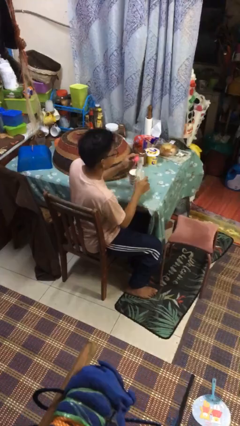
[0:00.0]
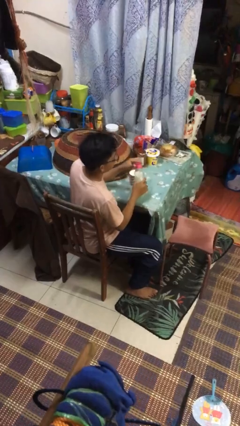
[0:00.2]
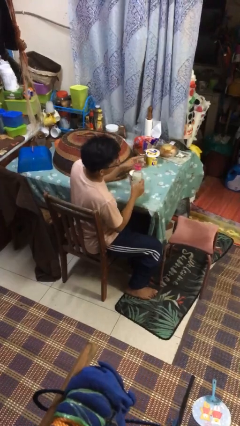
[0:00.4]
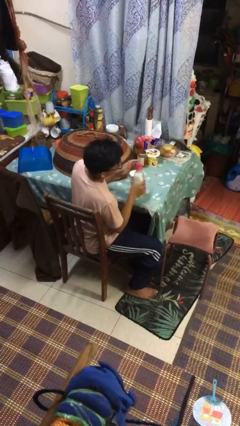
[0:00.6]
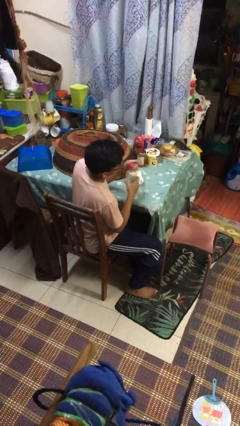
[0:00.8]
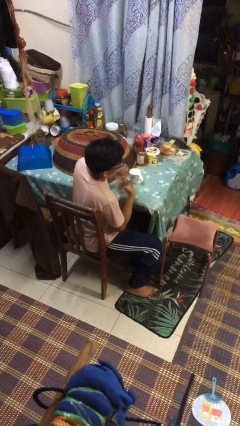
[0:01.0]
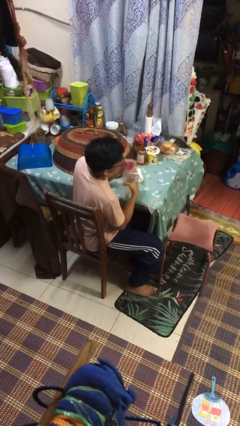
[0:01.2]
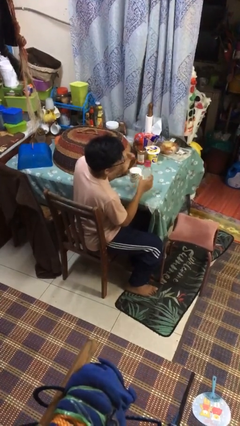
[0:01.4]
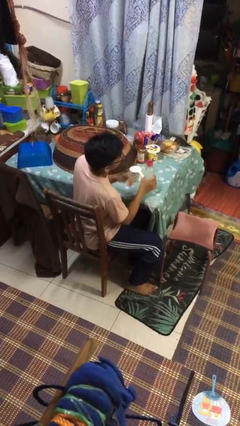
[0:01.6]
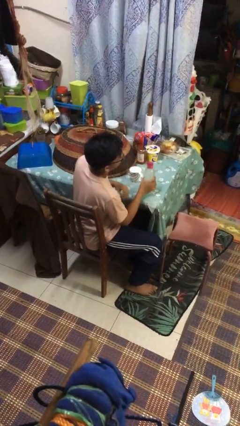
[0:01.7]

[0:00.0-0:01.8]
person screws lid to bottle

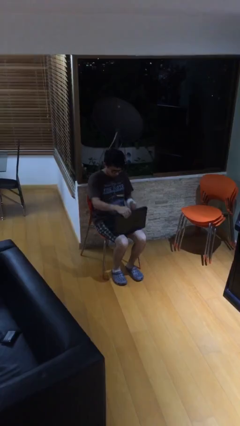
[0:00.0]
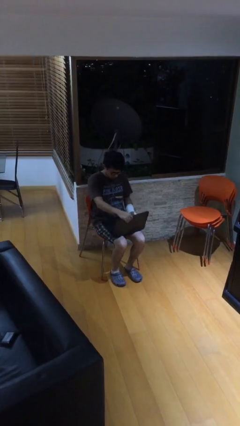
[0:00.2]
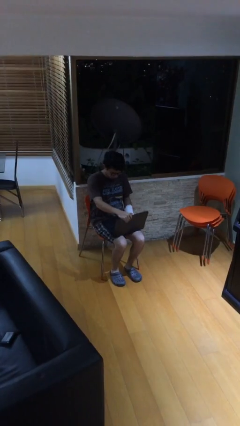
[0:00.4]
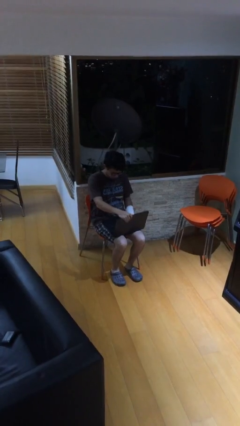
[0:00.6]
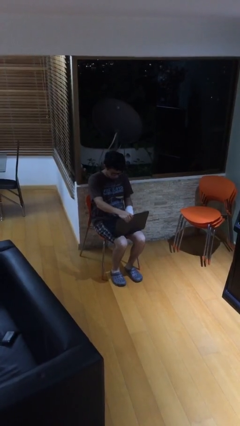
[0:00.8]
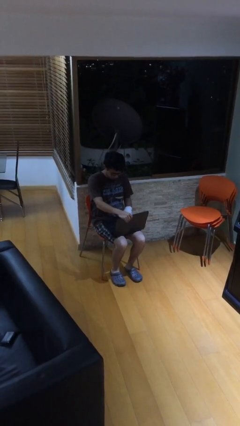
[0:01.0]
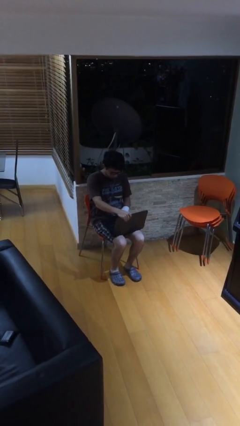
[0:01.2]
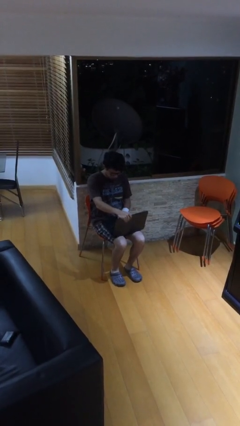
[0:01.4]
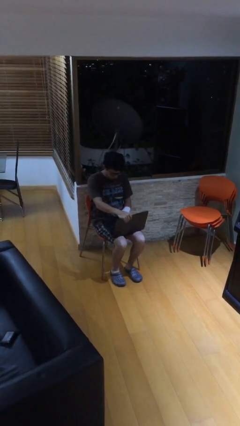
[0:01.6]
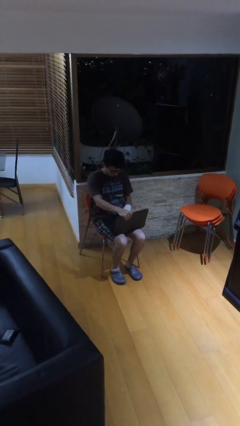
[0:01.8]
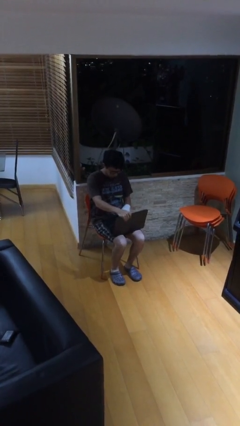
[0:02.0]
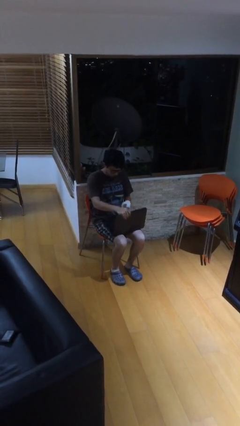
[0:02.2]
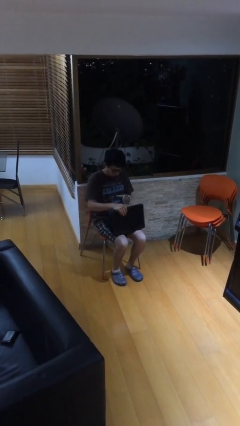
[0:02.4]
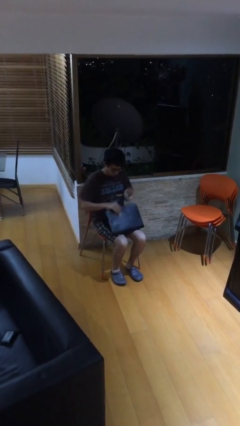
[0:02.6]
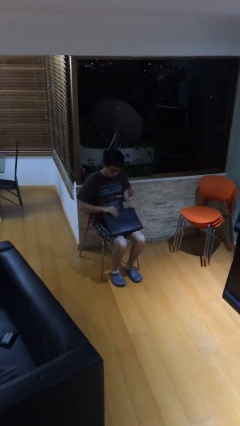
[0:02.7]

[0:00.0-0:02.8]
person interacts with laptop

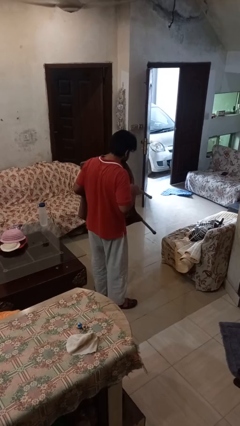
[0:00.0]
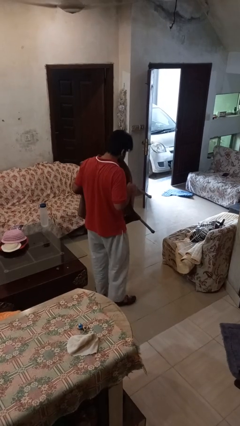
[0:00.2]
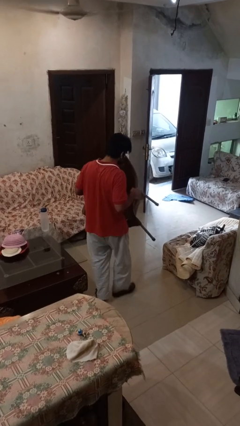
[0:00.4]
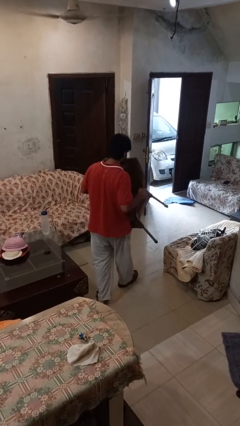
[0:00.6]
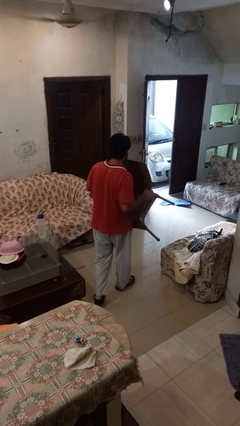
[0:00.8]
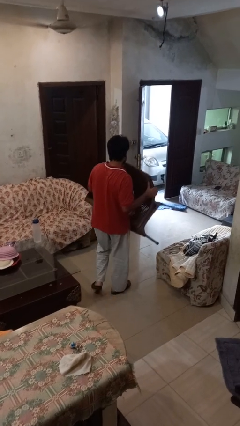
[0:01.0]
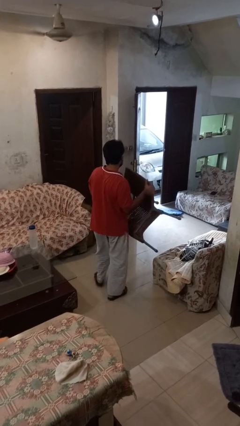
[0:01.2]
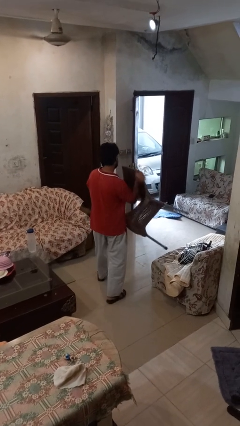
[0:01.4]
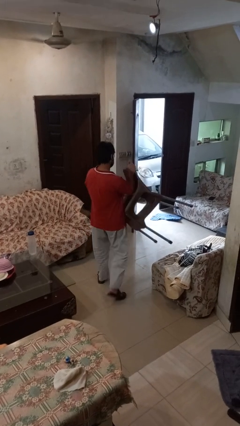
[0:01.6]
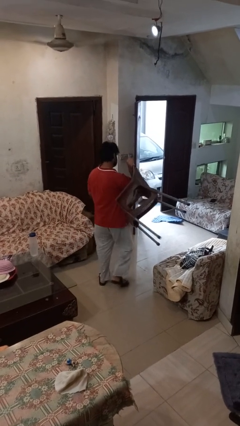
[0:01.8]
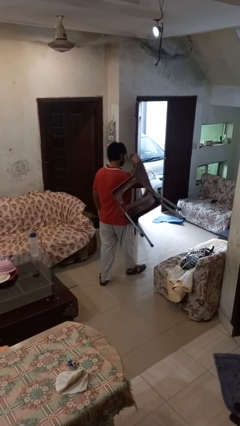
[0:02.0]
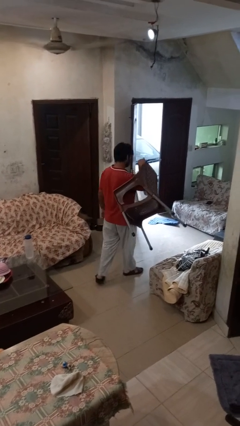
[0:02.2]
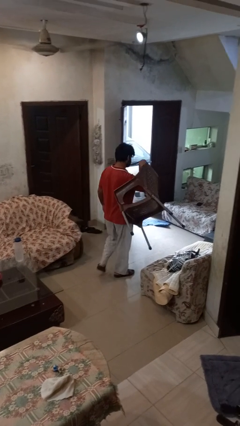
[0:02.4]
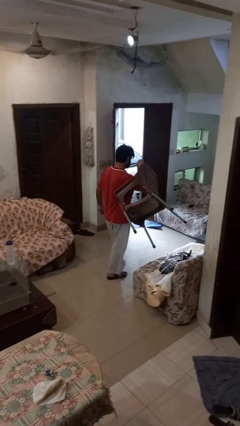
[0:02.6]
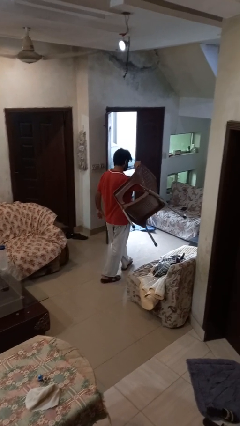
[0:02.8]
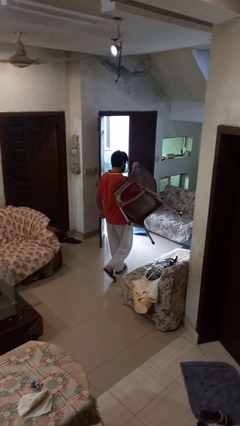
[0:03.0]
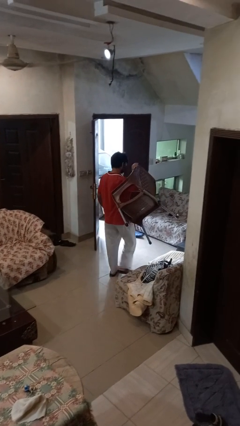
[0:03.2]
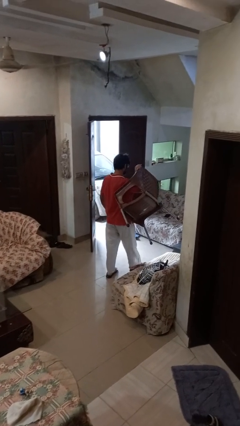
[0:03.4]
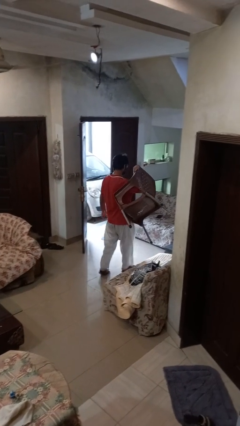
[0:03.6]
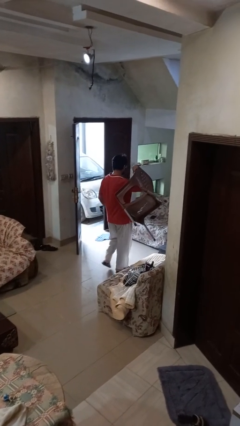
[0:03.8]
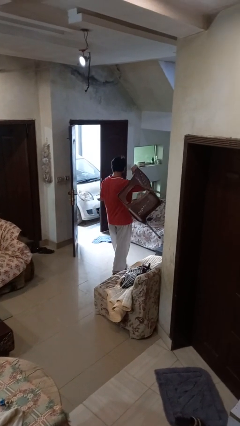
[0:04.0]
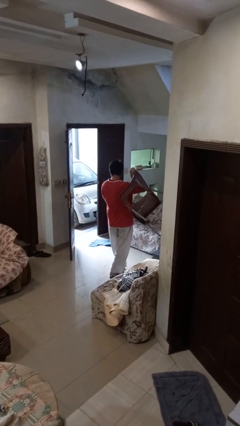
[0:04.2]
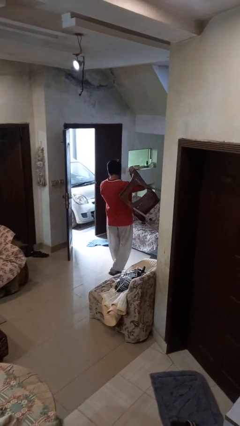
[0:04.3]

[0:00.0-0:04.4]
person carries furniture

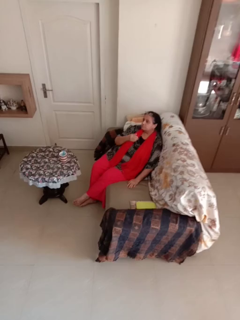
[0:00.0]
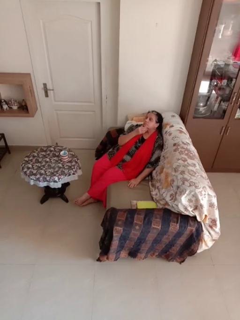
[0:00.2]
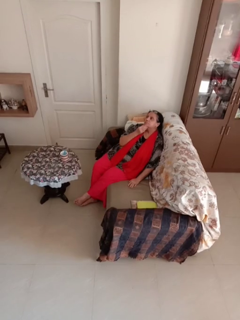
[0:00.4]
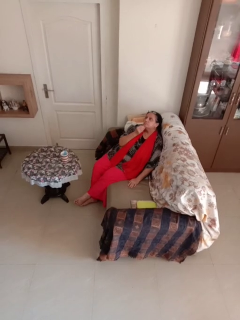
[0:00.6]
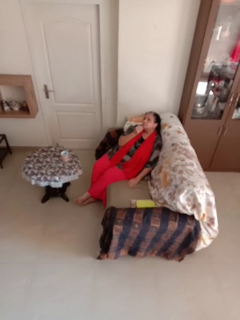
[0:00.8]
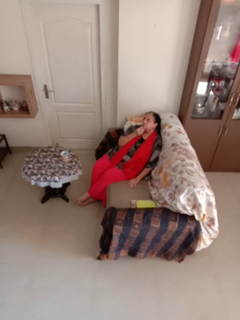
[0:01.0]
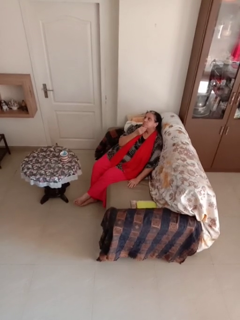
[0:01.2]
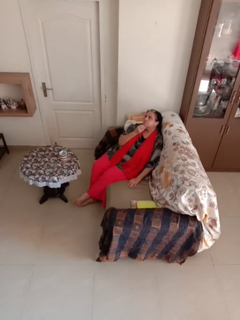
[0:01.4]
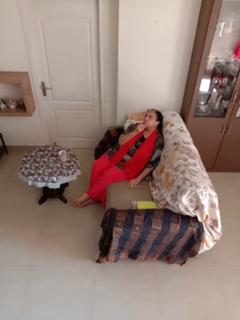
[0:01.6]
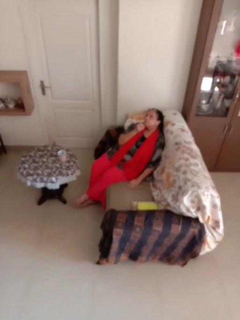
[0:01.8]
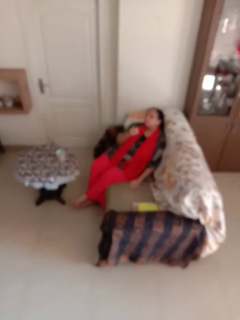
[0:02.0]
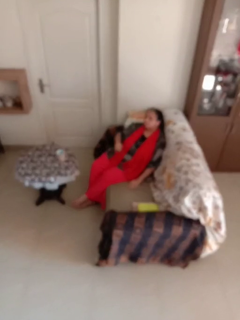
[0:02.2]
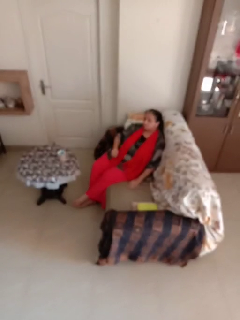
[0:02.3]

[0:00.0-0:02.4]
person strokes chin

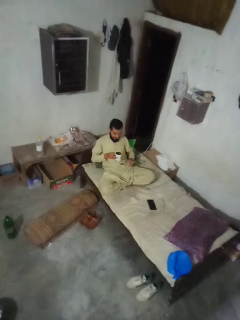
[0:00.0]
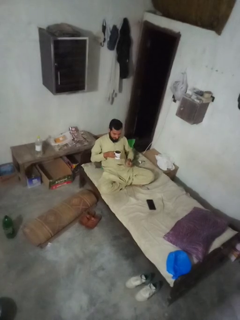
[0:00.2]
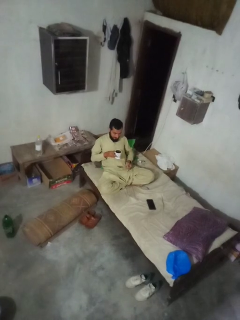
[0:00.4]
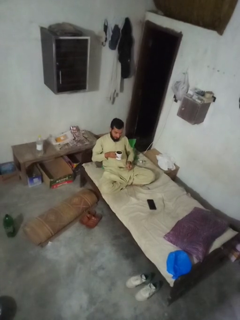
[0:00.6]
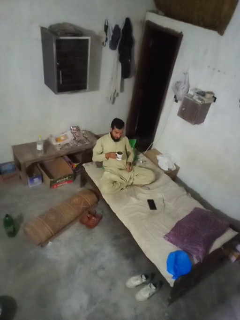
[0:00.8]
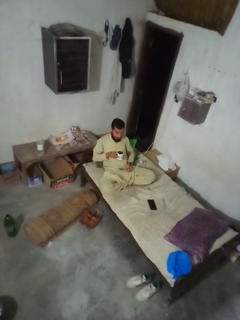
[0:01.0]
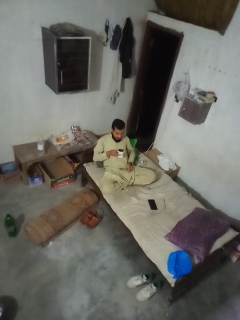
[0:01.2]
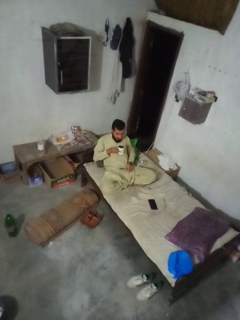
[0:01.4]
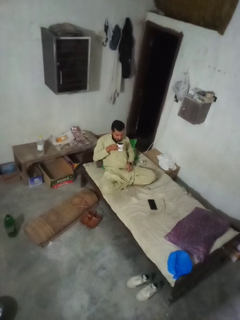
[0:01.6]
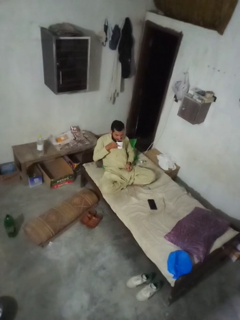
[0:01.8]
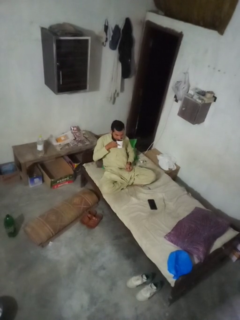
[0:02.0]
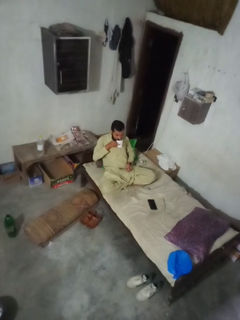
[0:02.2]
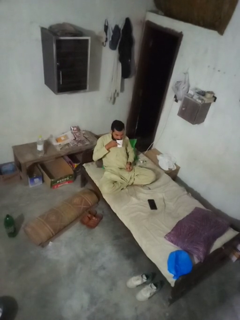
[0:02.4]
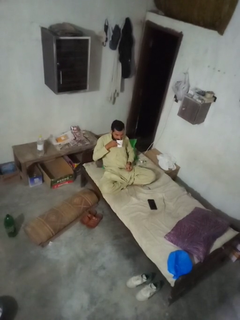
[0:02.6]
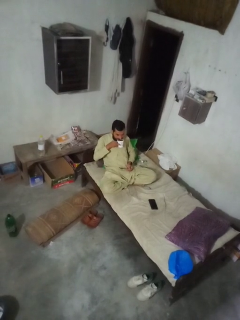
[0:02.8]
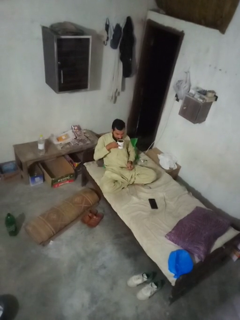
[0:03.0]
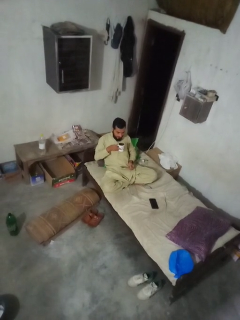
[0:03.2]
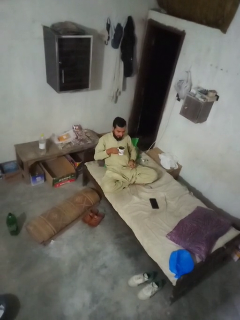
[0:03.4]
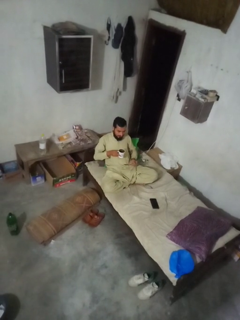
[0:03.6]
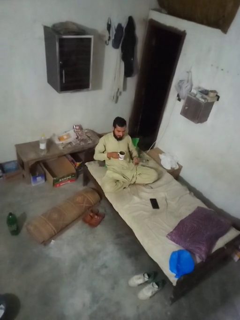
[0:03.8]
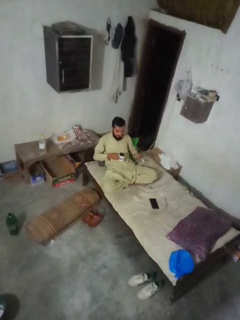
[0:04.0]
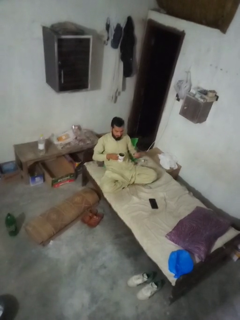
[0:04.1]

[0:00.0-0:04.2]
person drinks from mug

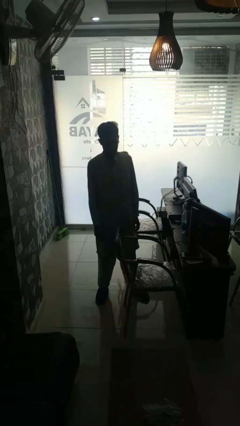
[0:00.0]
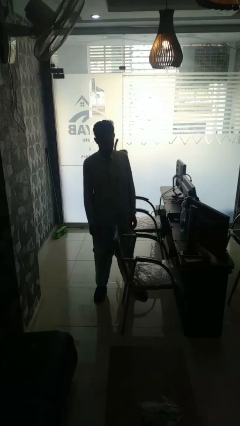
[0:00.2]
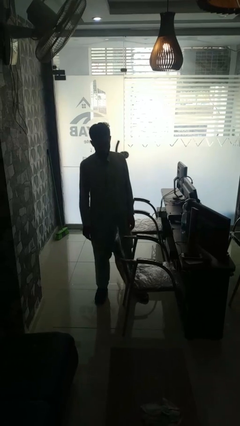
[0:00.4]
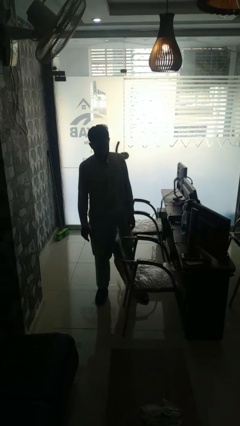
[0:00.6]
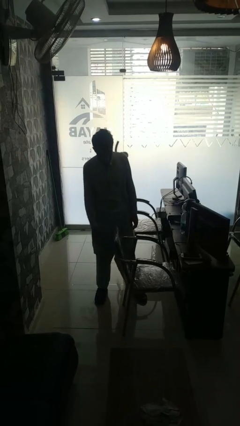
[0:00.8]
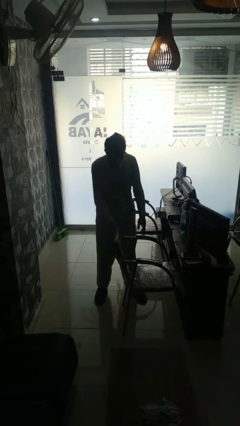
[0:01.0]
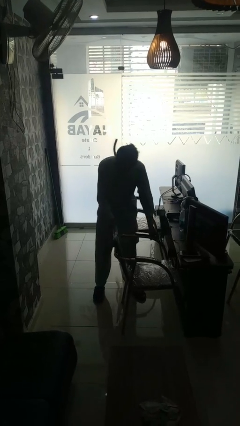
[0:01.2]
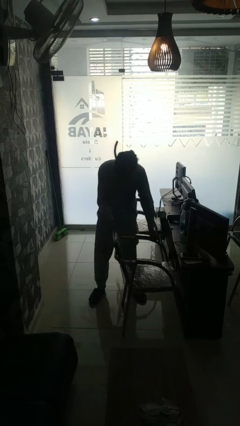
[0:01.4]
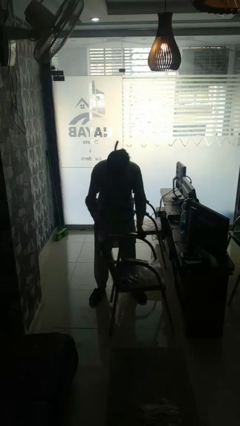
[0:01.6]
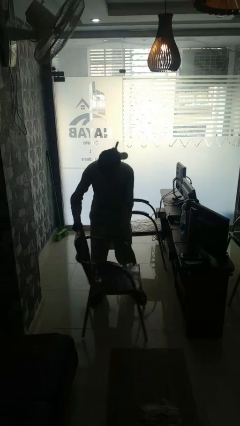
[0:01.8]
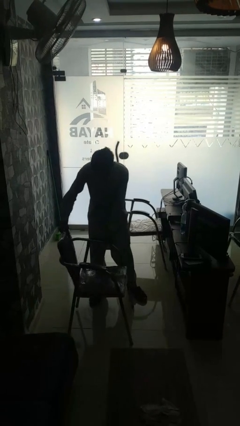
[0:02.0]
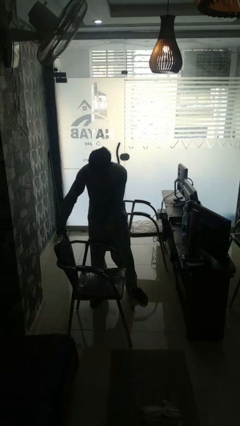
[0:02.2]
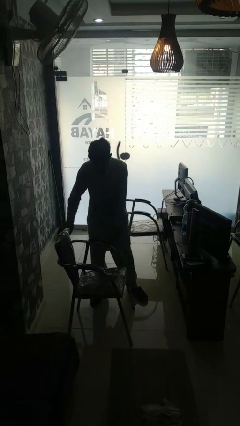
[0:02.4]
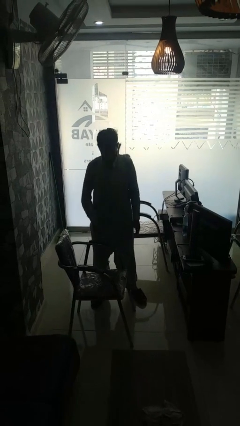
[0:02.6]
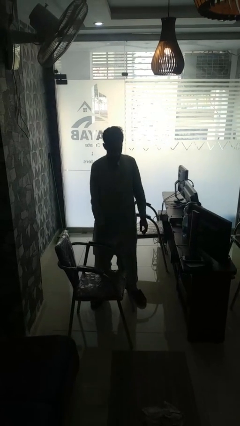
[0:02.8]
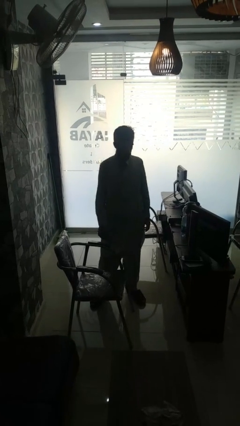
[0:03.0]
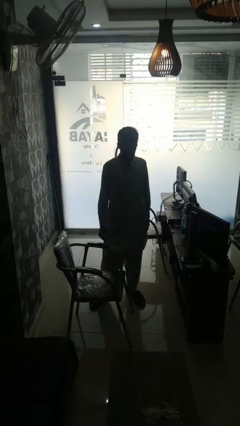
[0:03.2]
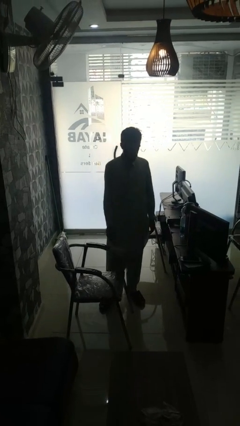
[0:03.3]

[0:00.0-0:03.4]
person pulls out chair
